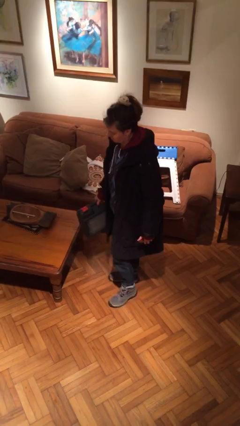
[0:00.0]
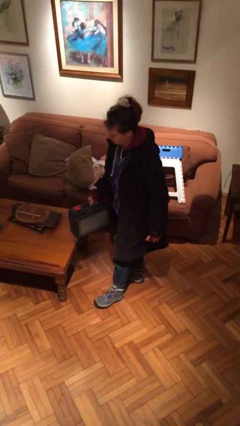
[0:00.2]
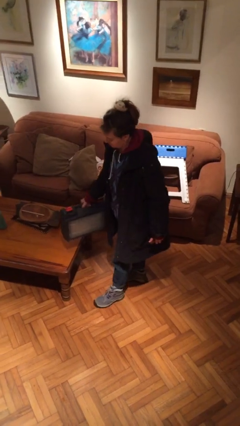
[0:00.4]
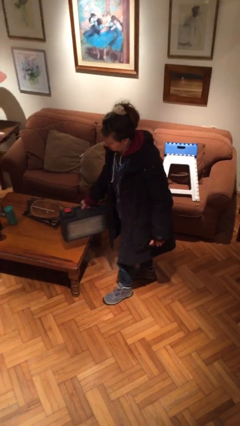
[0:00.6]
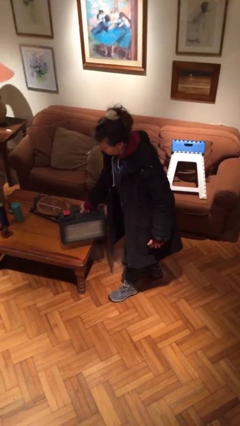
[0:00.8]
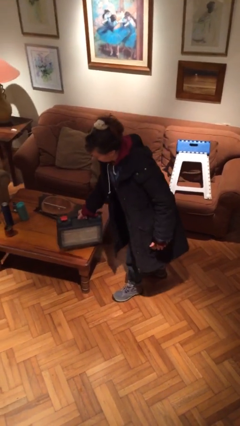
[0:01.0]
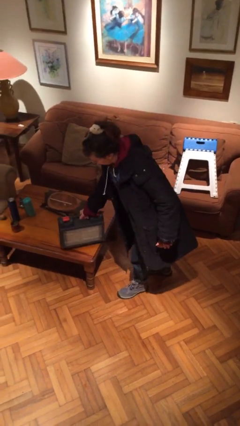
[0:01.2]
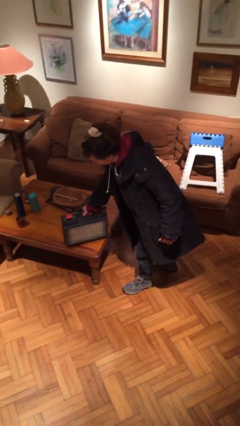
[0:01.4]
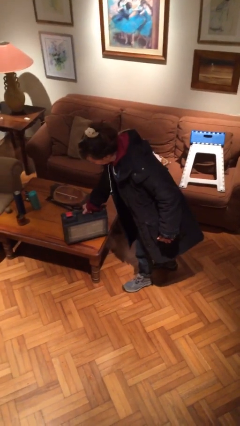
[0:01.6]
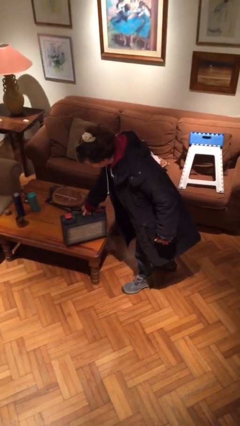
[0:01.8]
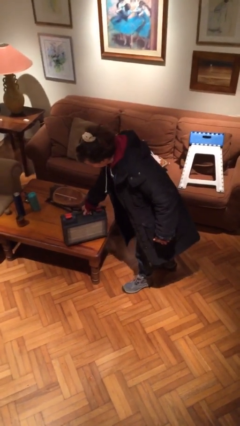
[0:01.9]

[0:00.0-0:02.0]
person puts down object on table

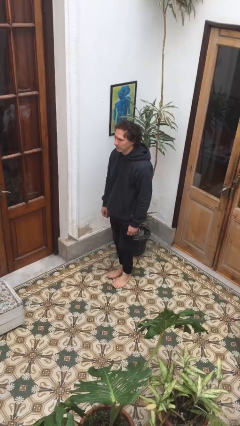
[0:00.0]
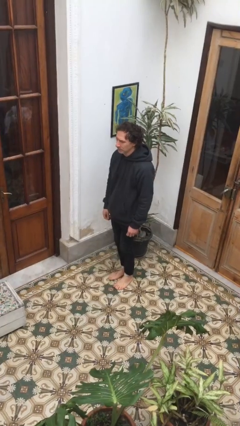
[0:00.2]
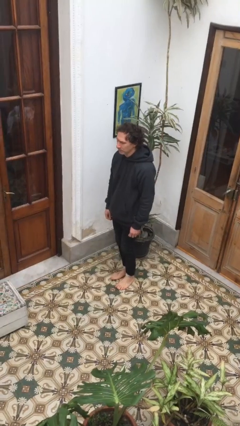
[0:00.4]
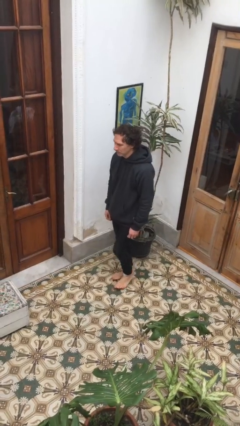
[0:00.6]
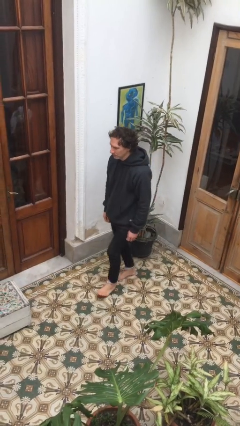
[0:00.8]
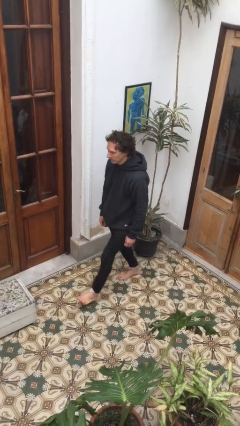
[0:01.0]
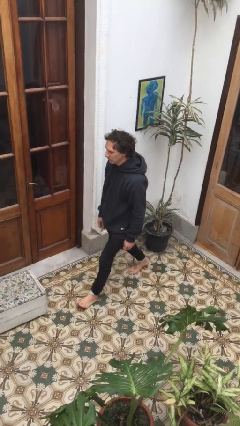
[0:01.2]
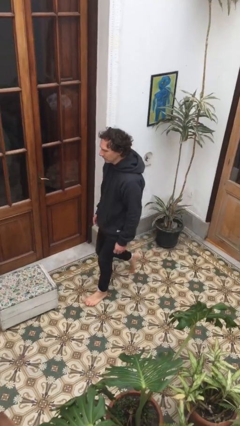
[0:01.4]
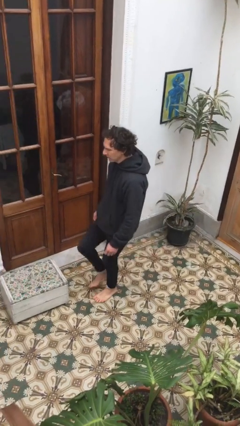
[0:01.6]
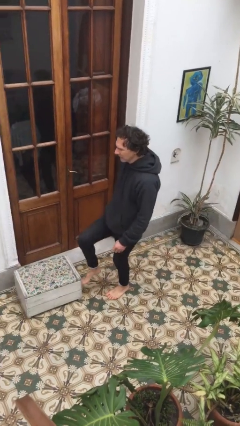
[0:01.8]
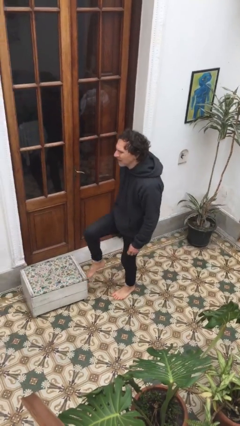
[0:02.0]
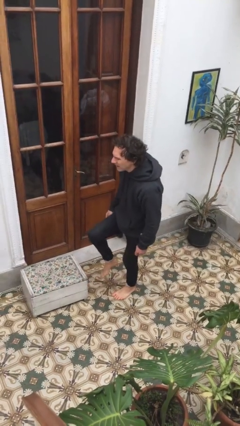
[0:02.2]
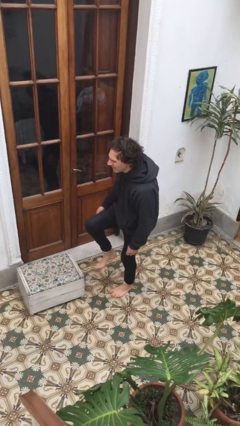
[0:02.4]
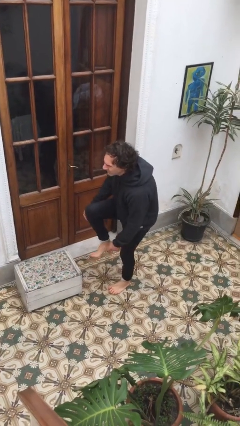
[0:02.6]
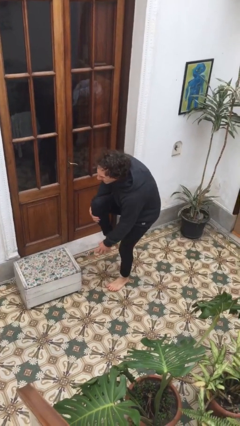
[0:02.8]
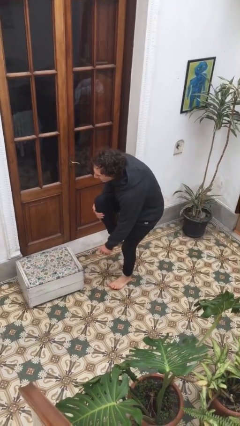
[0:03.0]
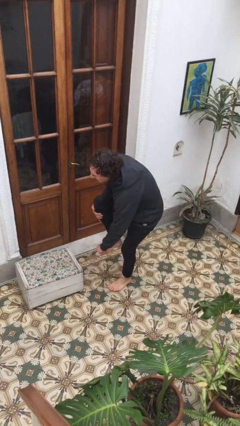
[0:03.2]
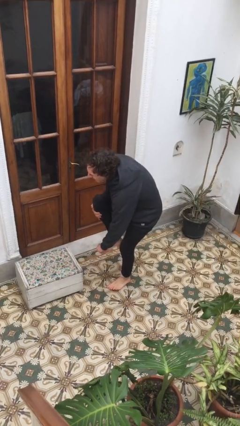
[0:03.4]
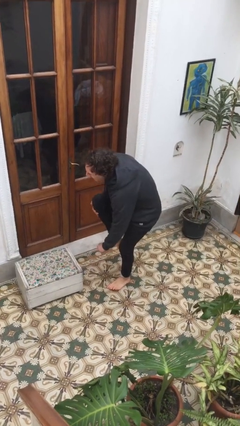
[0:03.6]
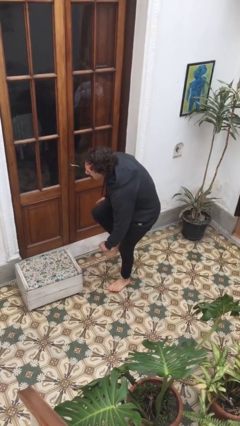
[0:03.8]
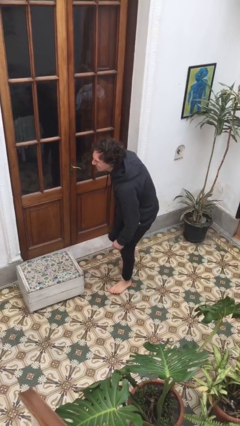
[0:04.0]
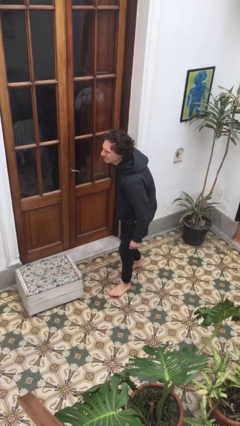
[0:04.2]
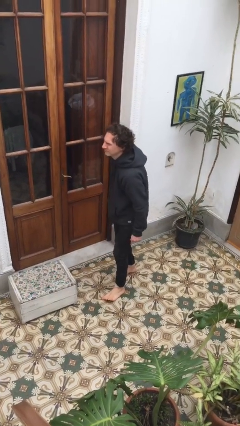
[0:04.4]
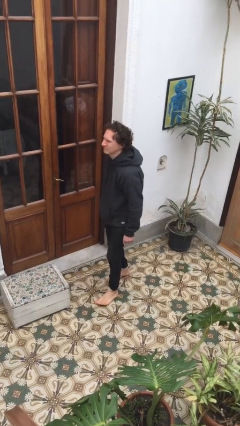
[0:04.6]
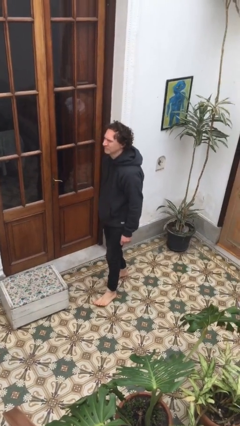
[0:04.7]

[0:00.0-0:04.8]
person stubs toe

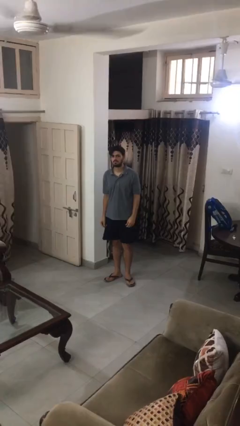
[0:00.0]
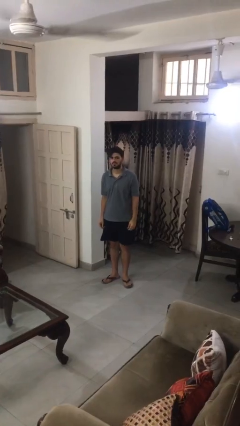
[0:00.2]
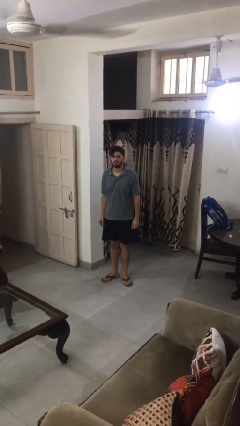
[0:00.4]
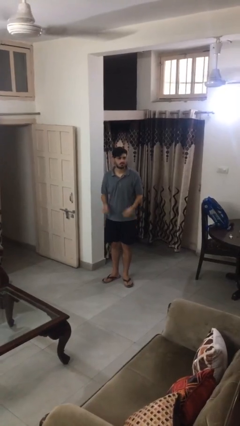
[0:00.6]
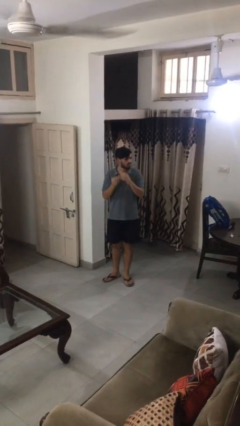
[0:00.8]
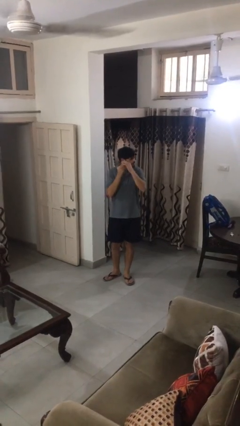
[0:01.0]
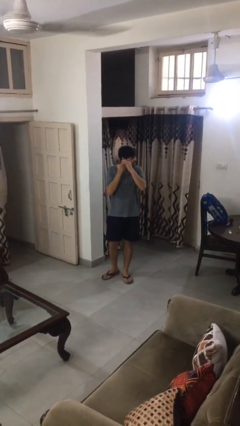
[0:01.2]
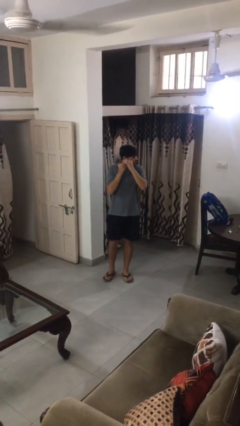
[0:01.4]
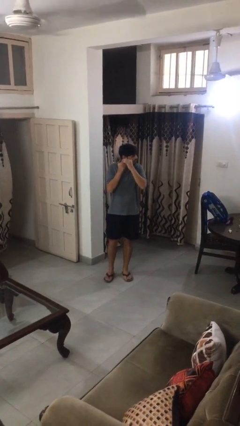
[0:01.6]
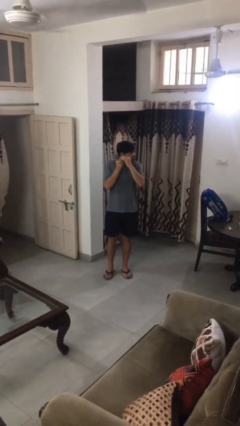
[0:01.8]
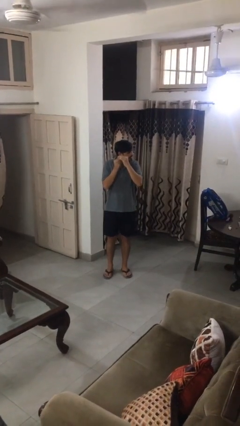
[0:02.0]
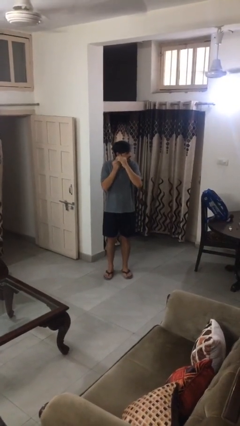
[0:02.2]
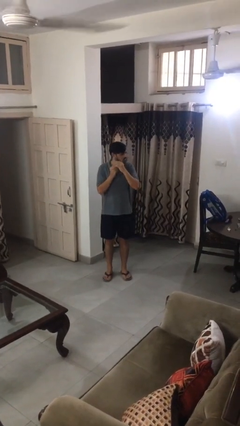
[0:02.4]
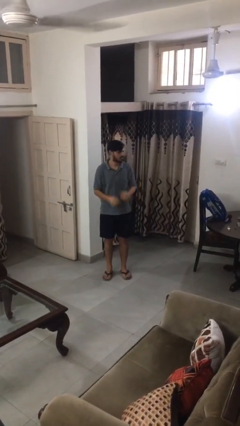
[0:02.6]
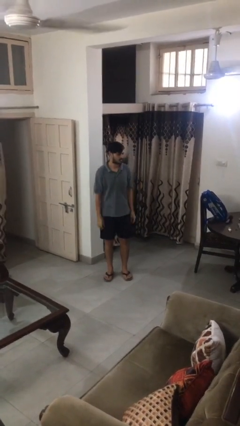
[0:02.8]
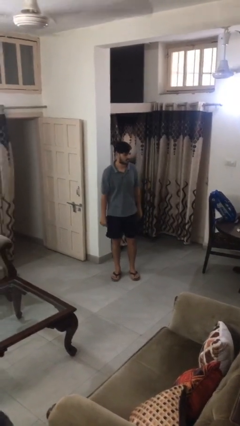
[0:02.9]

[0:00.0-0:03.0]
person puts on earrings

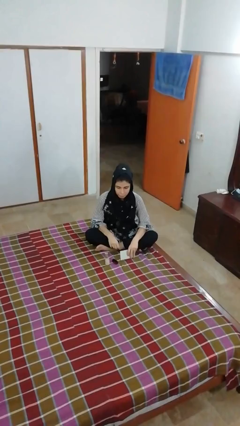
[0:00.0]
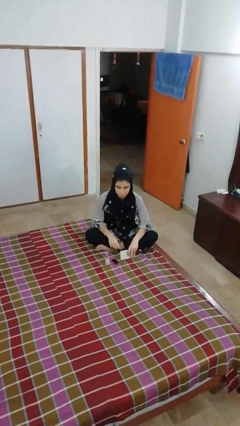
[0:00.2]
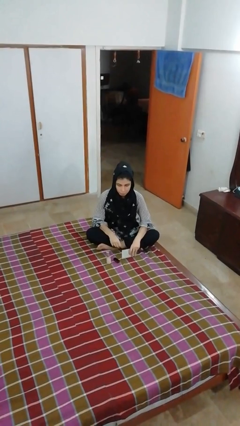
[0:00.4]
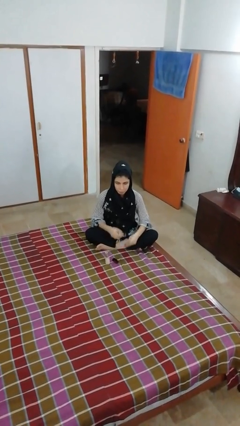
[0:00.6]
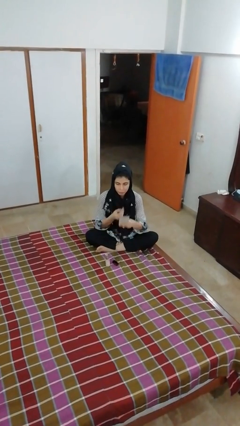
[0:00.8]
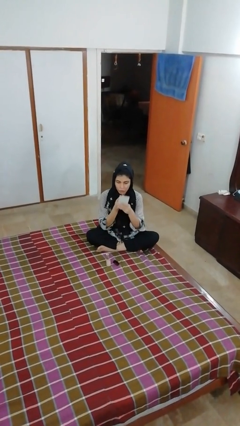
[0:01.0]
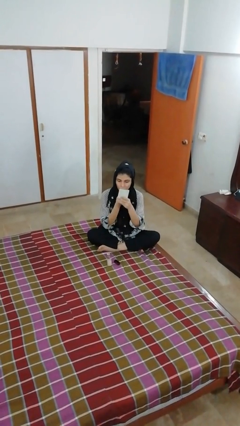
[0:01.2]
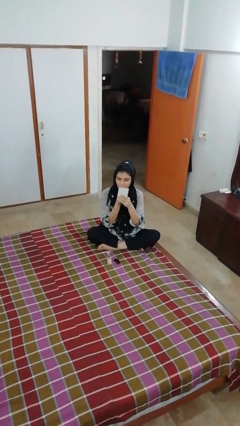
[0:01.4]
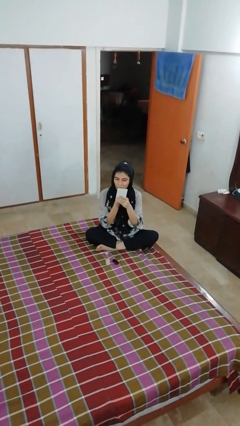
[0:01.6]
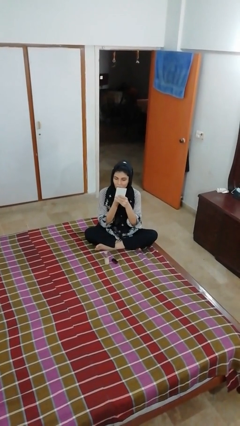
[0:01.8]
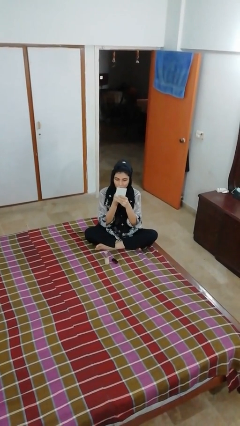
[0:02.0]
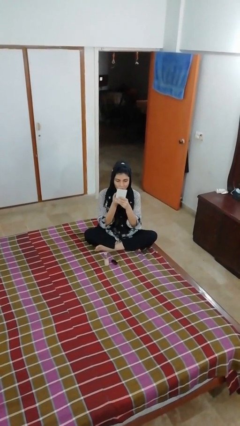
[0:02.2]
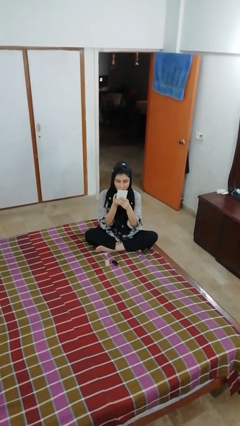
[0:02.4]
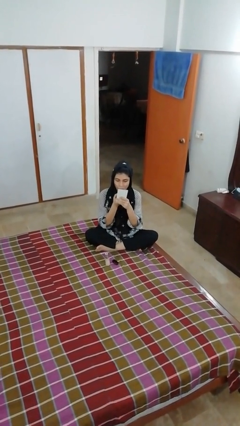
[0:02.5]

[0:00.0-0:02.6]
person applies lip makeup

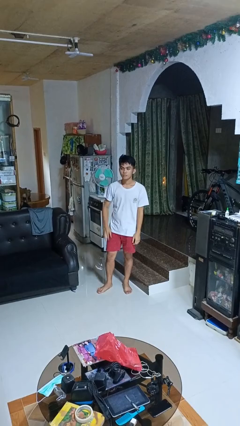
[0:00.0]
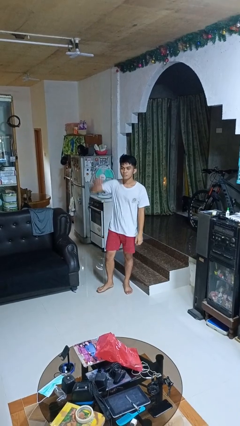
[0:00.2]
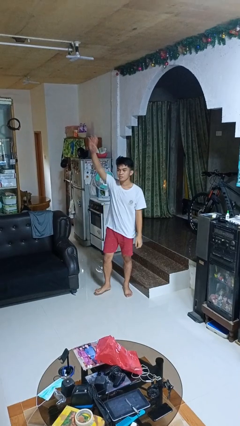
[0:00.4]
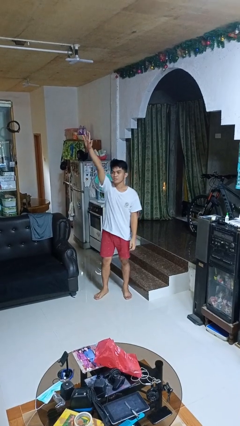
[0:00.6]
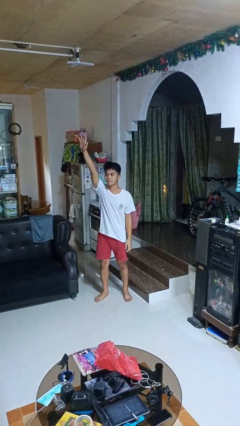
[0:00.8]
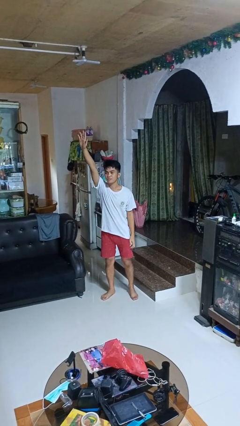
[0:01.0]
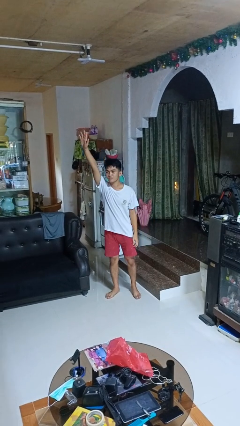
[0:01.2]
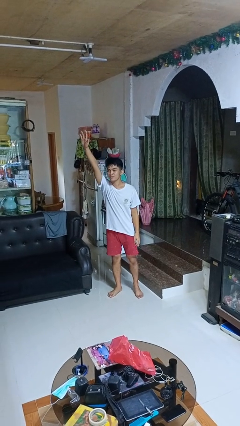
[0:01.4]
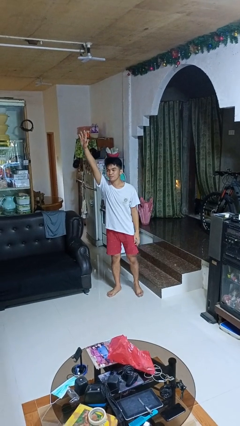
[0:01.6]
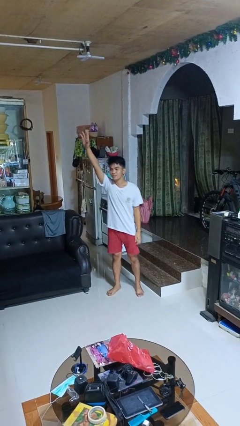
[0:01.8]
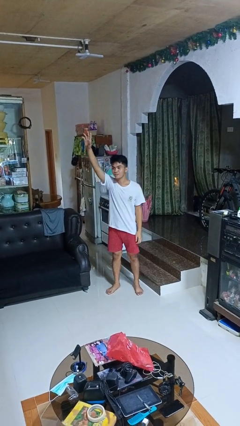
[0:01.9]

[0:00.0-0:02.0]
person gestures raise hand

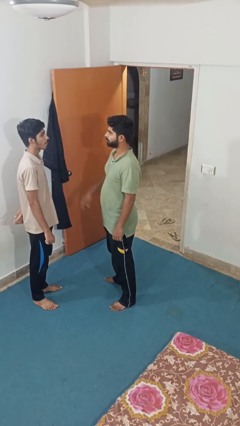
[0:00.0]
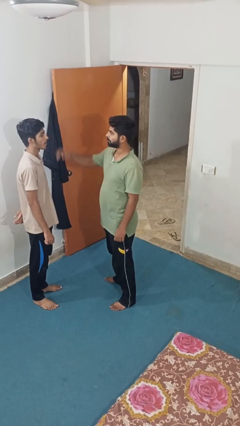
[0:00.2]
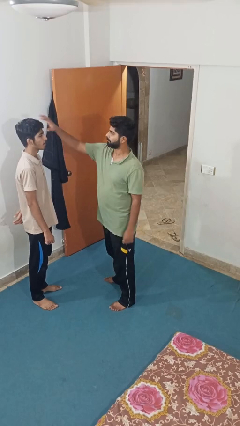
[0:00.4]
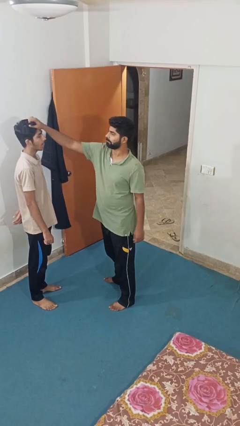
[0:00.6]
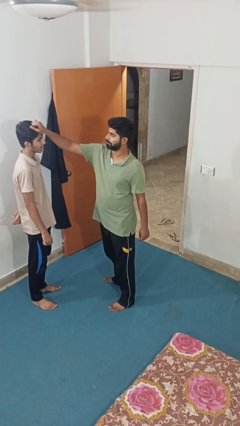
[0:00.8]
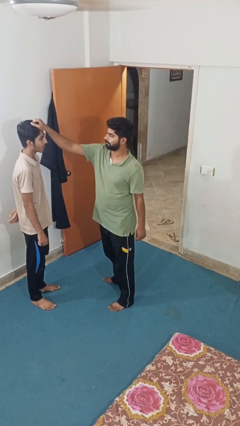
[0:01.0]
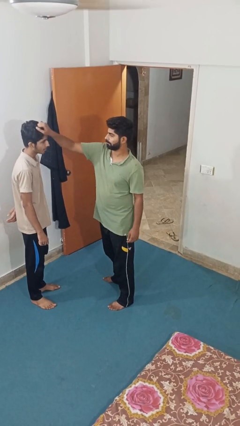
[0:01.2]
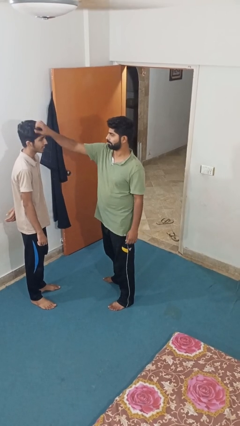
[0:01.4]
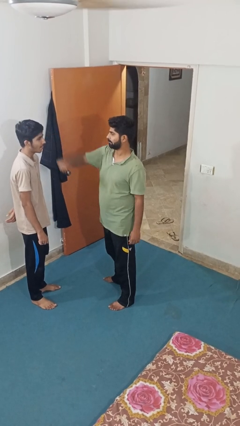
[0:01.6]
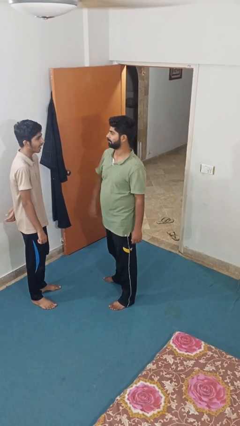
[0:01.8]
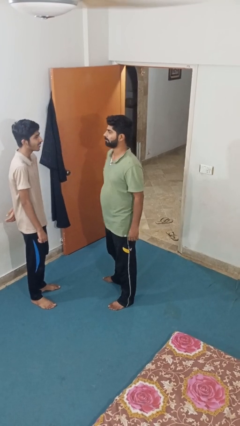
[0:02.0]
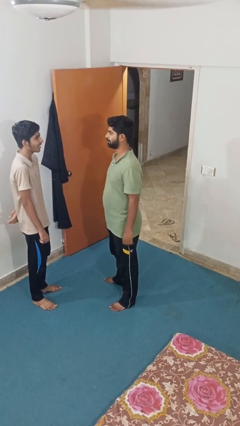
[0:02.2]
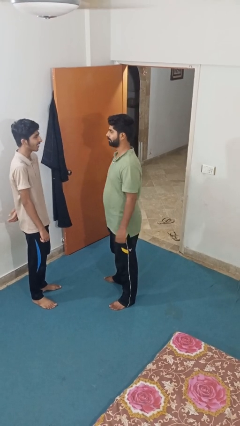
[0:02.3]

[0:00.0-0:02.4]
person grabs person by hair

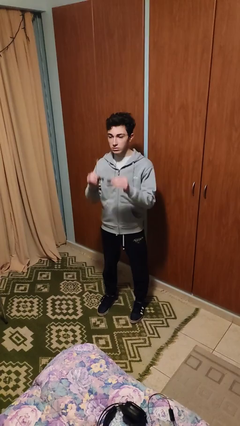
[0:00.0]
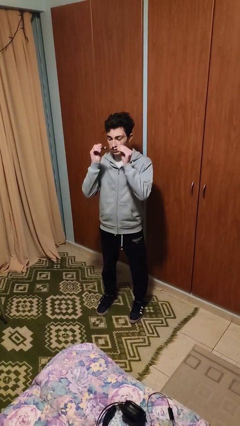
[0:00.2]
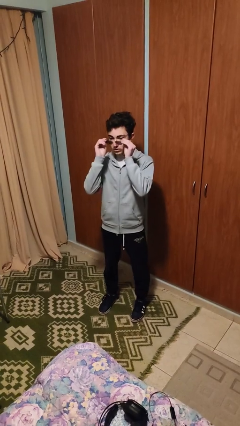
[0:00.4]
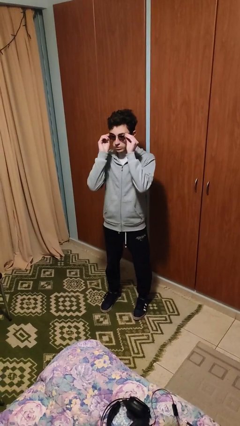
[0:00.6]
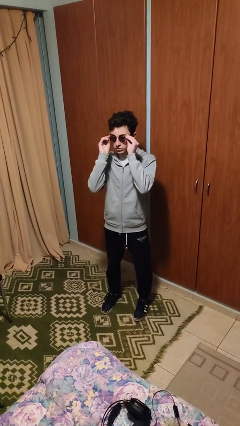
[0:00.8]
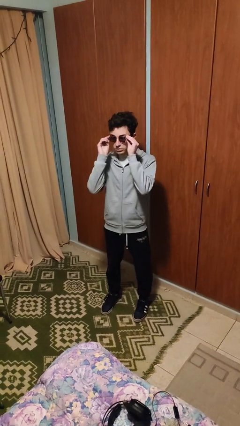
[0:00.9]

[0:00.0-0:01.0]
person puts on glasses
